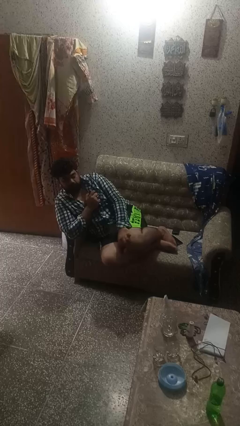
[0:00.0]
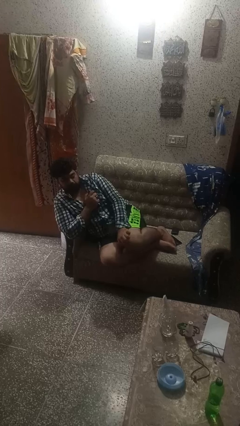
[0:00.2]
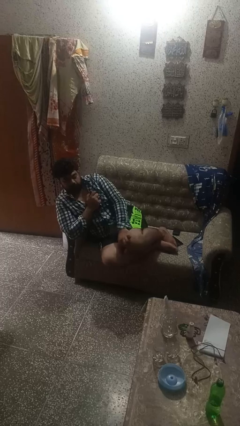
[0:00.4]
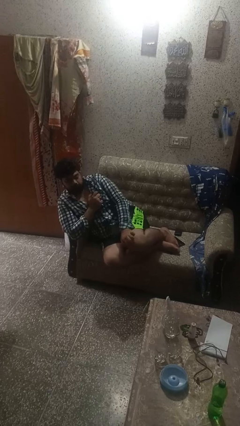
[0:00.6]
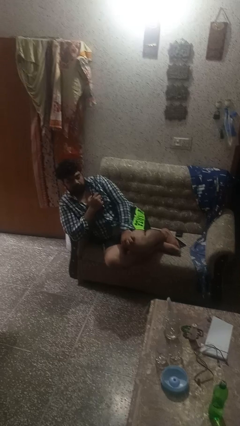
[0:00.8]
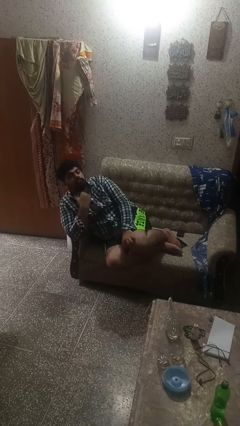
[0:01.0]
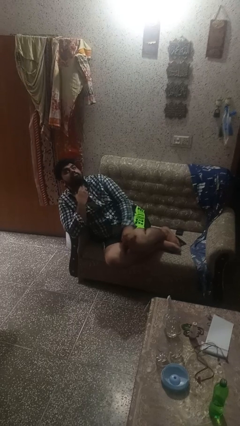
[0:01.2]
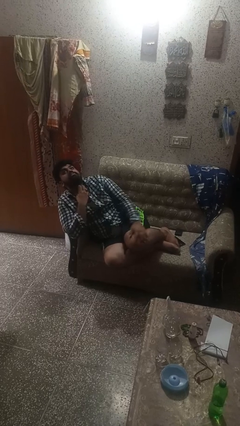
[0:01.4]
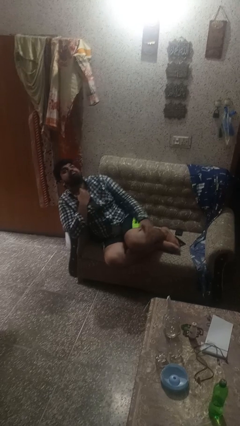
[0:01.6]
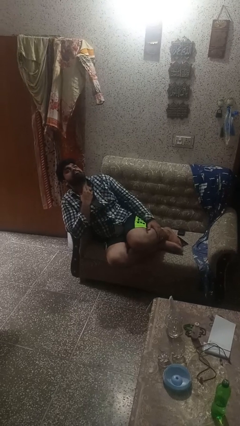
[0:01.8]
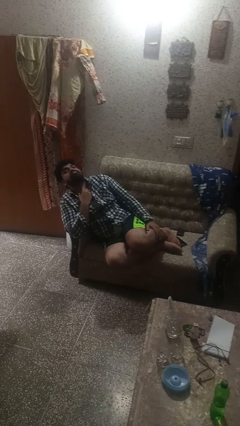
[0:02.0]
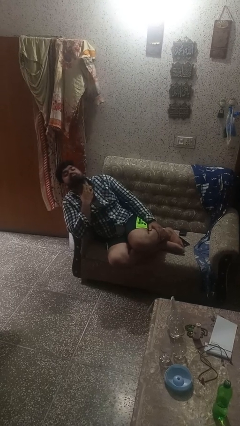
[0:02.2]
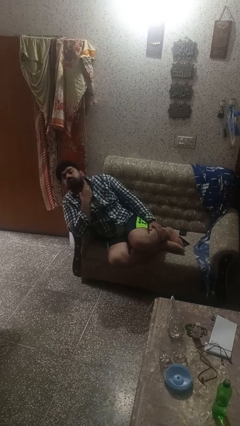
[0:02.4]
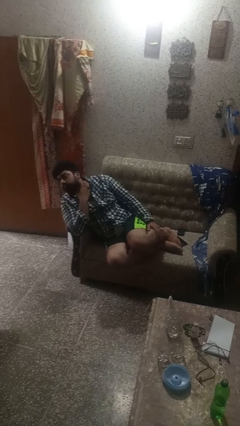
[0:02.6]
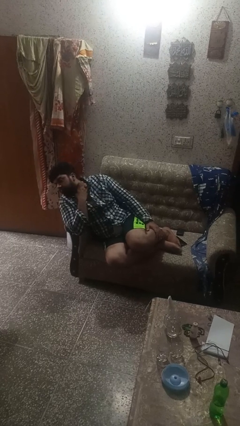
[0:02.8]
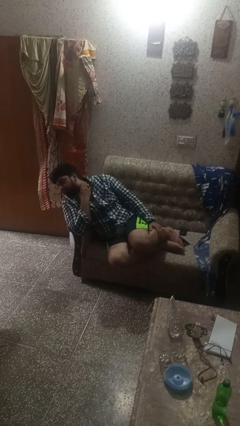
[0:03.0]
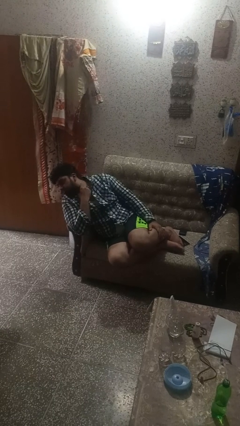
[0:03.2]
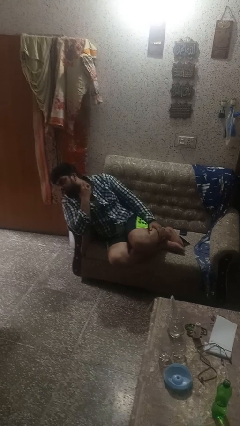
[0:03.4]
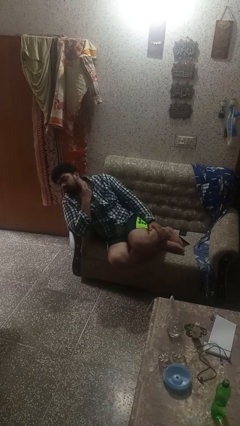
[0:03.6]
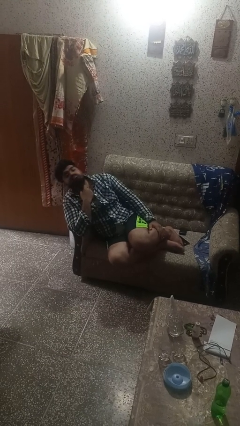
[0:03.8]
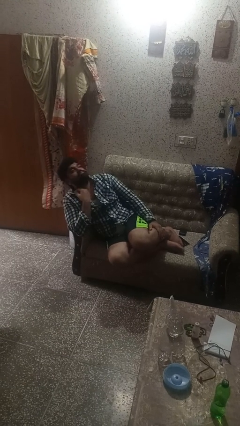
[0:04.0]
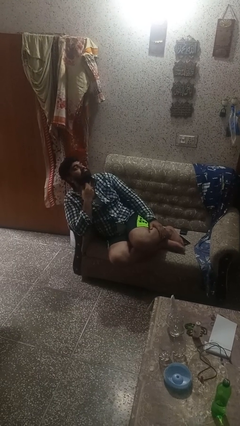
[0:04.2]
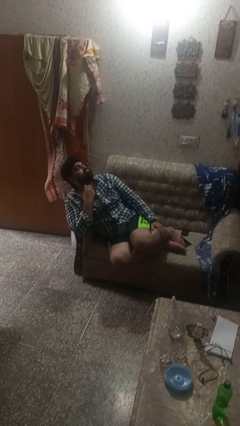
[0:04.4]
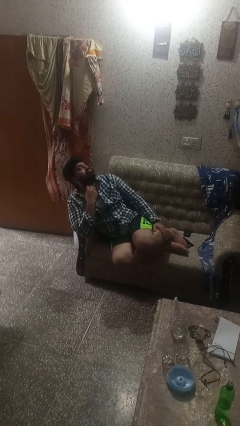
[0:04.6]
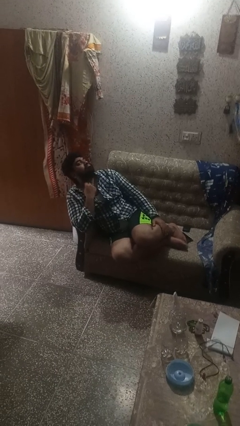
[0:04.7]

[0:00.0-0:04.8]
person rubs neck

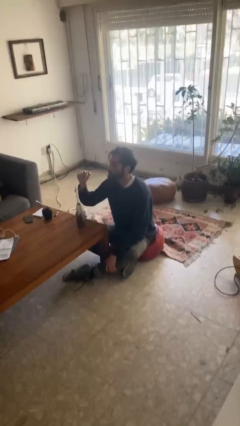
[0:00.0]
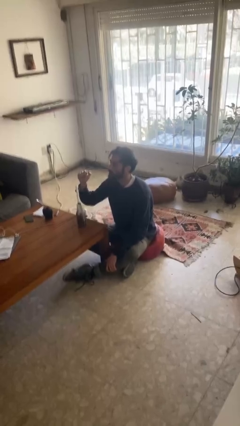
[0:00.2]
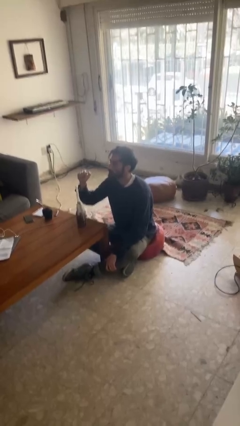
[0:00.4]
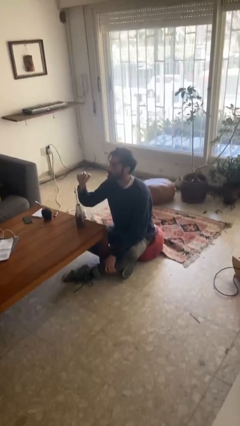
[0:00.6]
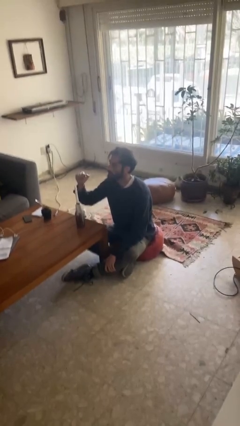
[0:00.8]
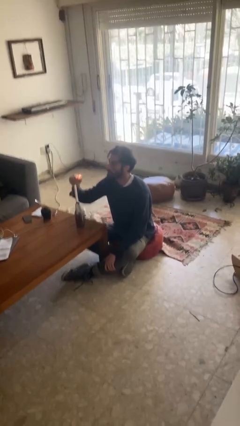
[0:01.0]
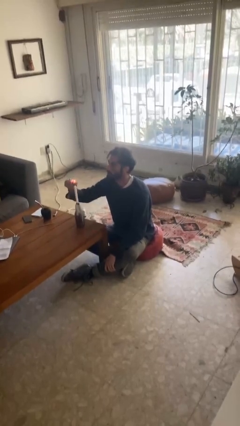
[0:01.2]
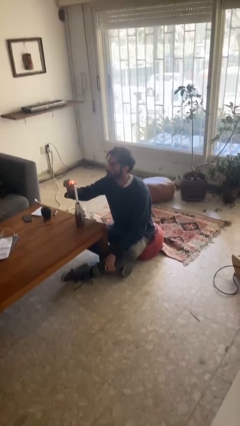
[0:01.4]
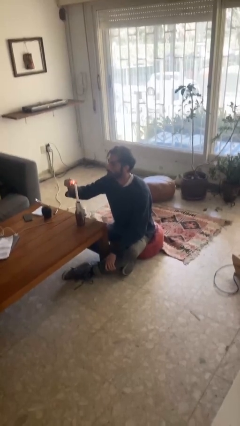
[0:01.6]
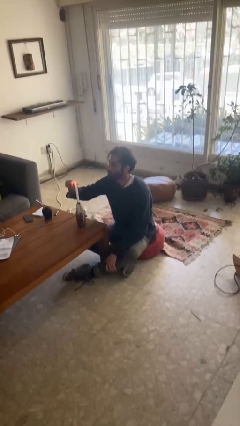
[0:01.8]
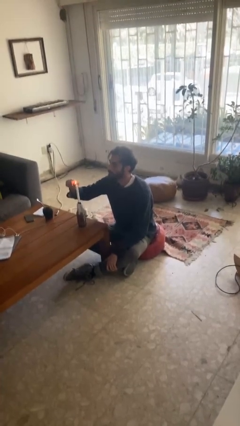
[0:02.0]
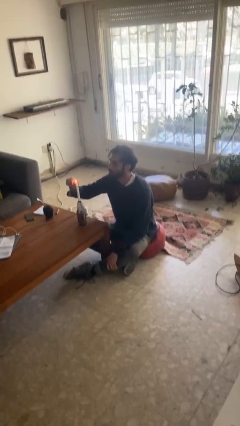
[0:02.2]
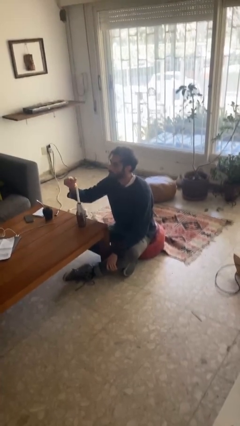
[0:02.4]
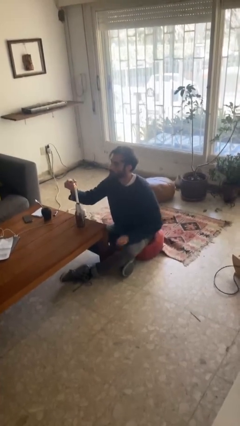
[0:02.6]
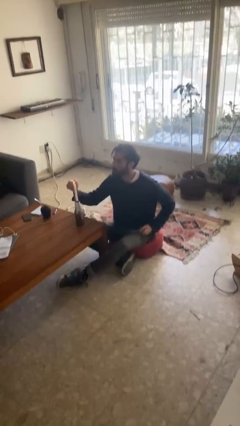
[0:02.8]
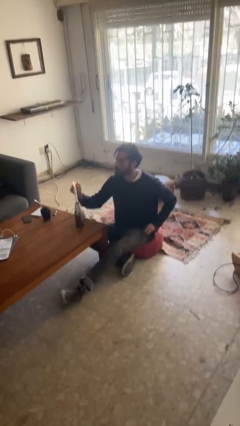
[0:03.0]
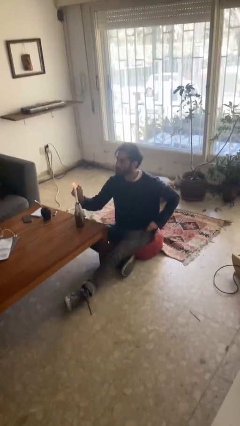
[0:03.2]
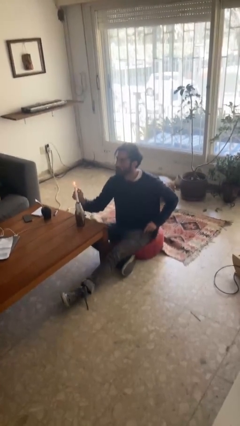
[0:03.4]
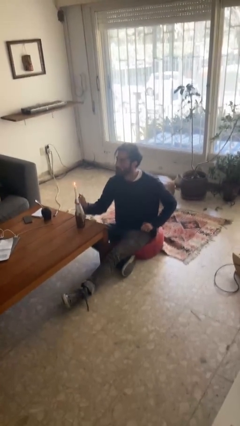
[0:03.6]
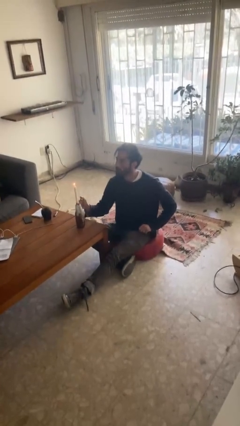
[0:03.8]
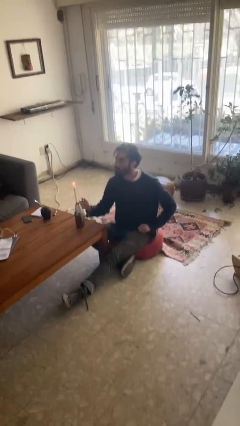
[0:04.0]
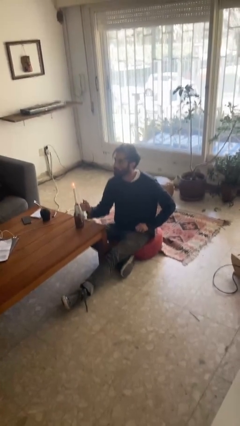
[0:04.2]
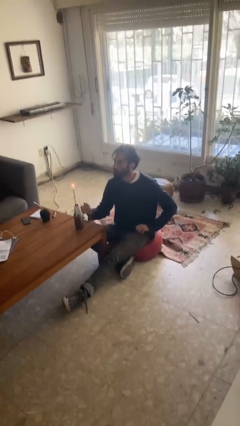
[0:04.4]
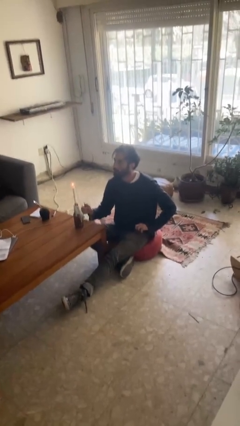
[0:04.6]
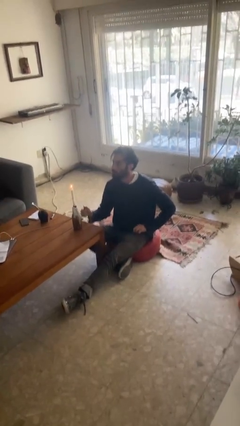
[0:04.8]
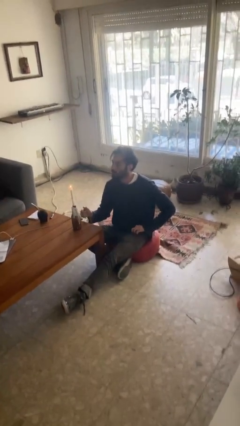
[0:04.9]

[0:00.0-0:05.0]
person lights candle

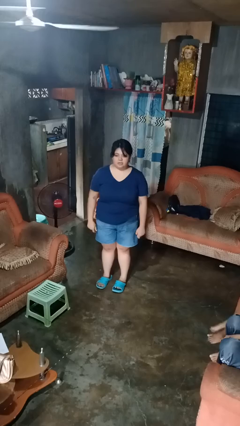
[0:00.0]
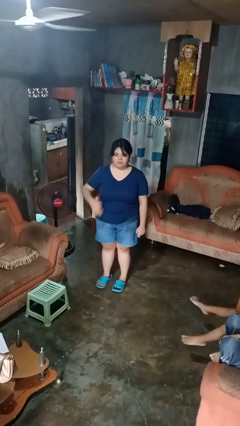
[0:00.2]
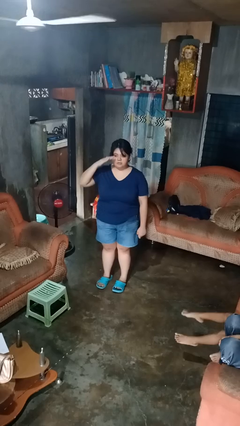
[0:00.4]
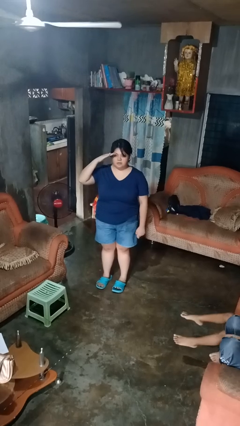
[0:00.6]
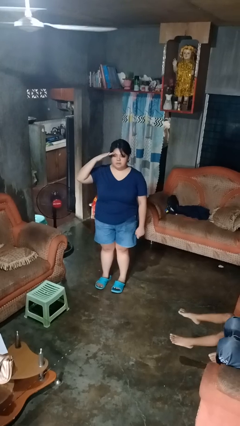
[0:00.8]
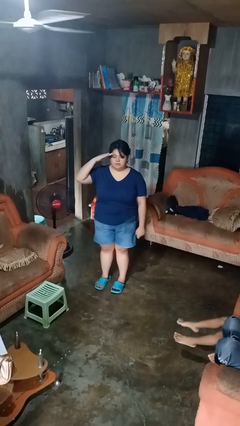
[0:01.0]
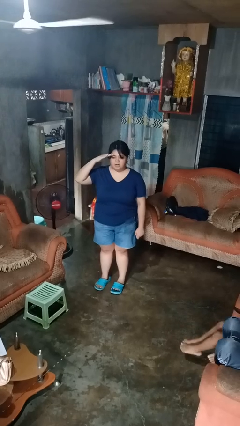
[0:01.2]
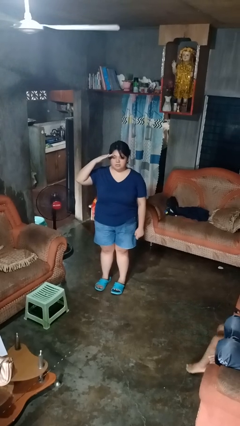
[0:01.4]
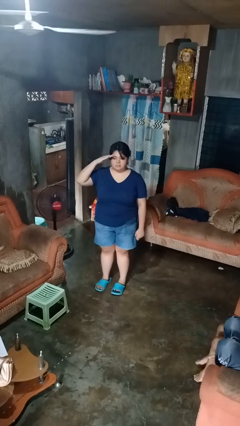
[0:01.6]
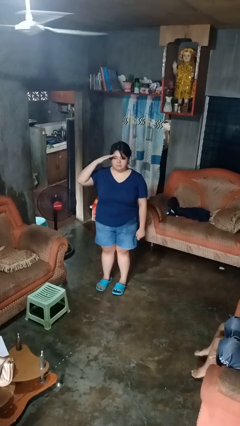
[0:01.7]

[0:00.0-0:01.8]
person salutes

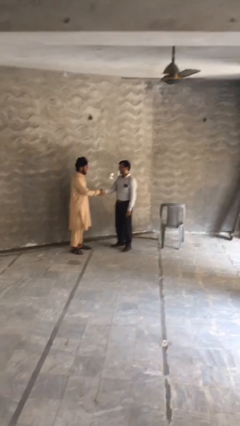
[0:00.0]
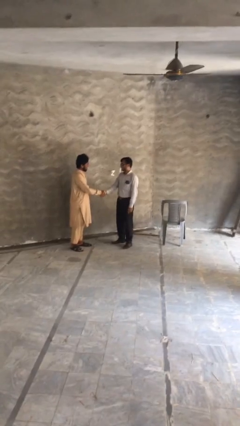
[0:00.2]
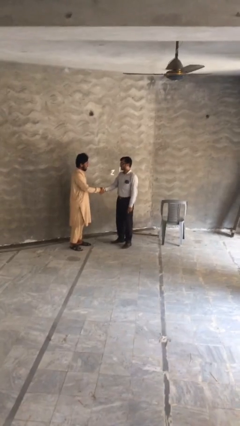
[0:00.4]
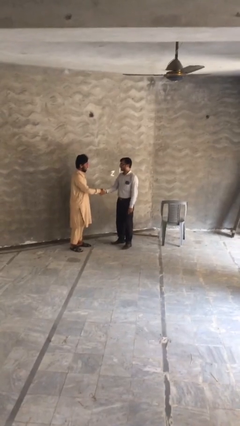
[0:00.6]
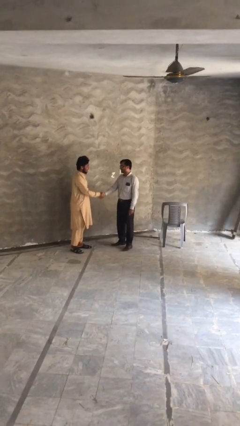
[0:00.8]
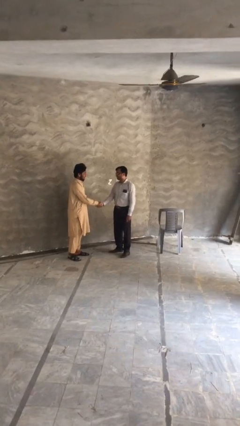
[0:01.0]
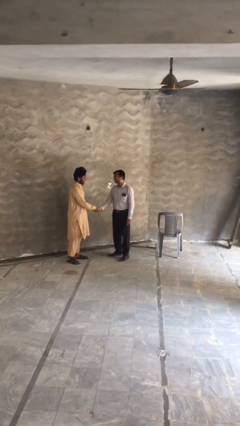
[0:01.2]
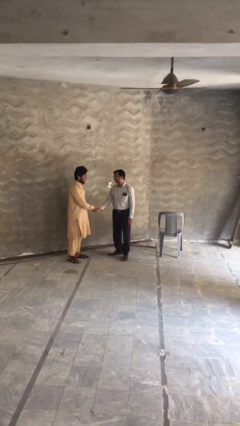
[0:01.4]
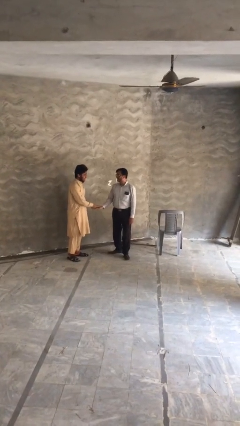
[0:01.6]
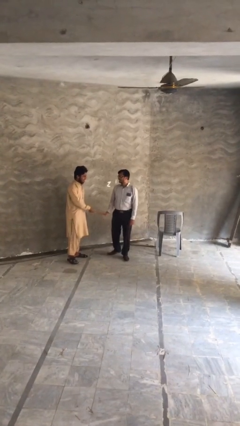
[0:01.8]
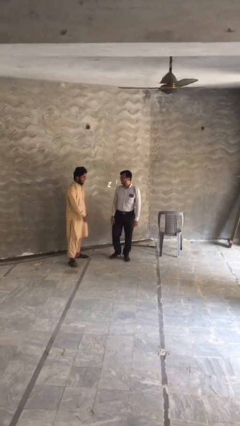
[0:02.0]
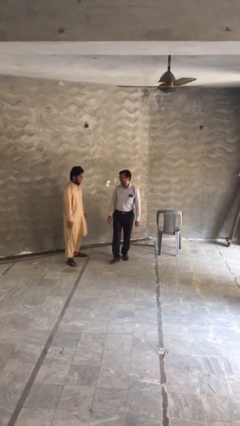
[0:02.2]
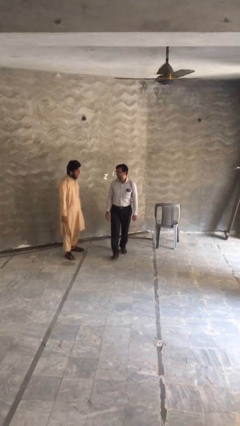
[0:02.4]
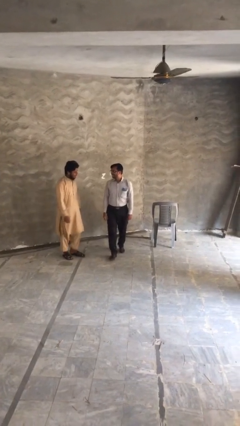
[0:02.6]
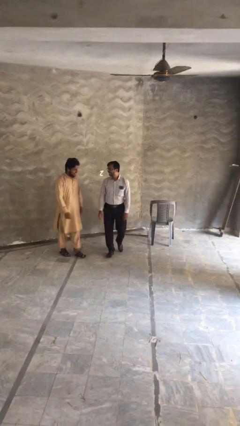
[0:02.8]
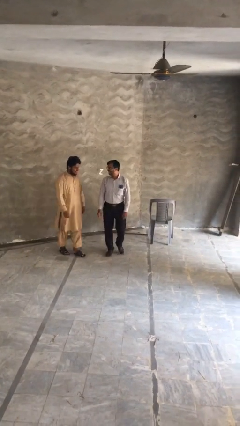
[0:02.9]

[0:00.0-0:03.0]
person talks to person

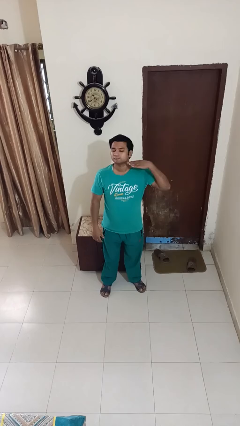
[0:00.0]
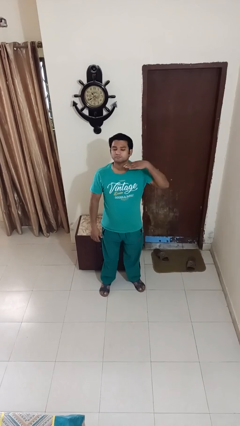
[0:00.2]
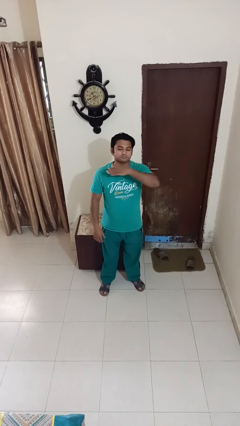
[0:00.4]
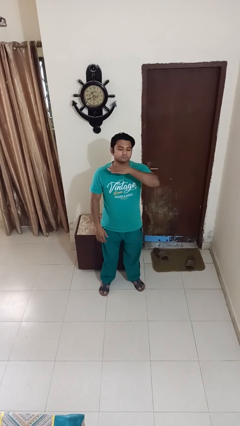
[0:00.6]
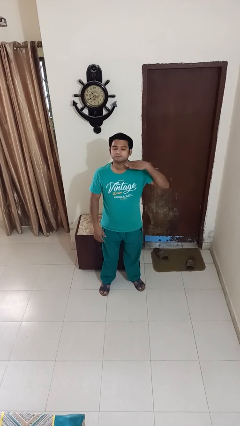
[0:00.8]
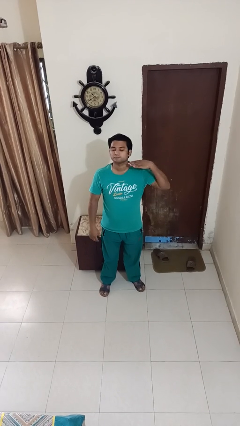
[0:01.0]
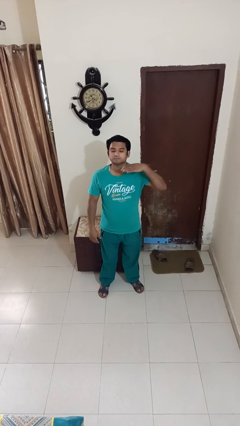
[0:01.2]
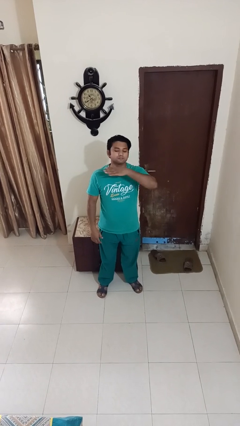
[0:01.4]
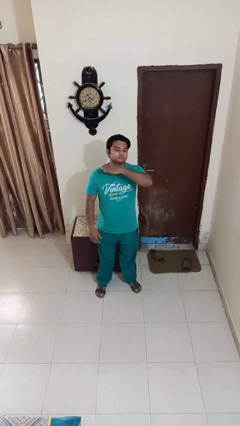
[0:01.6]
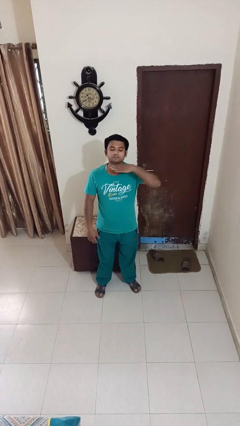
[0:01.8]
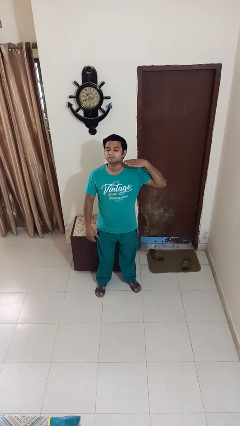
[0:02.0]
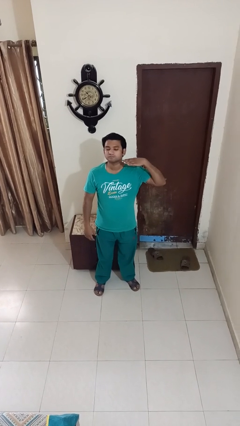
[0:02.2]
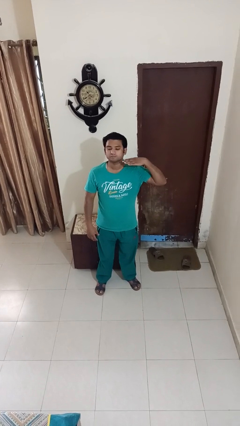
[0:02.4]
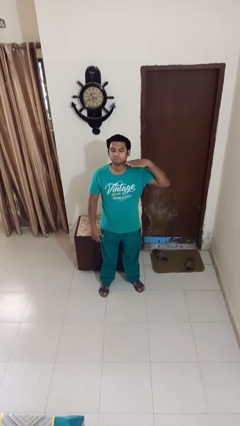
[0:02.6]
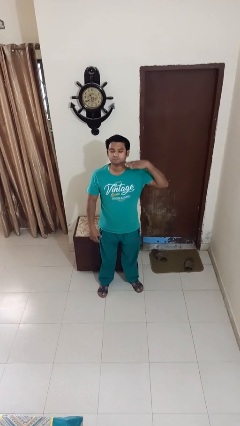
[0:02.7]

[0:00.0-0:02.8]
person gestures cut
